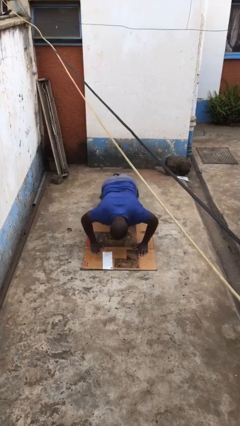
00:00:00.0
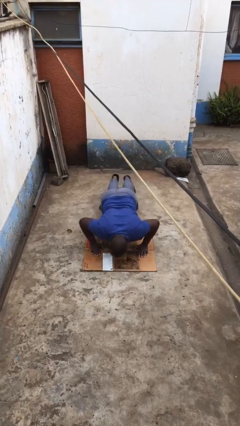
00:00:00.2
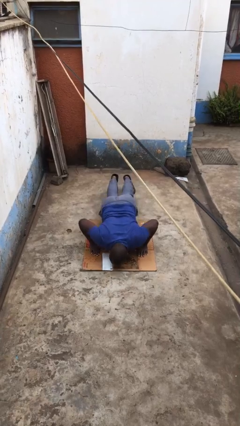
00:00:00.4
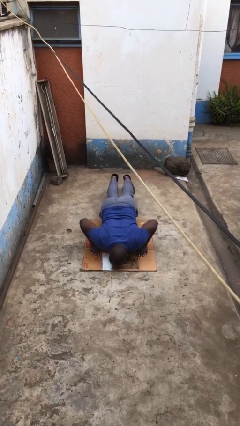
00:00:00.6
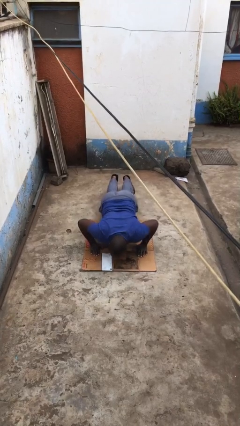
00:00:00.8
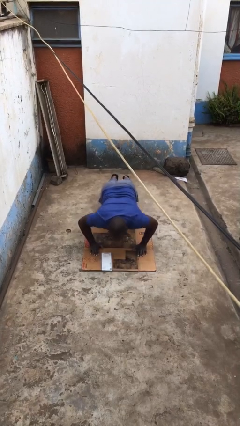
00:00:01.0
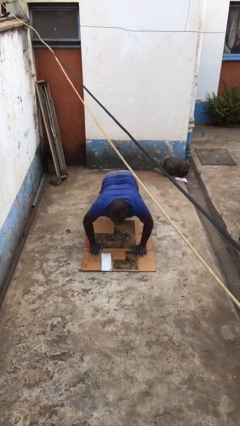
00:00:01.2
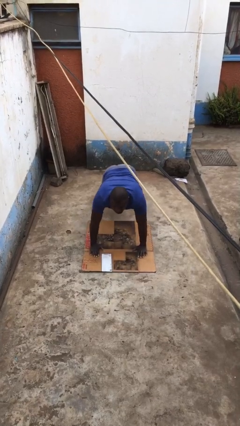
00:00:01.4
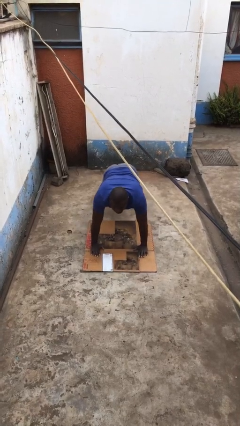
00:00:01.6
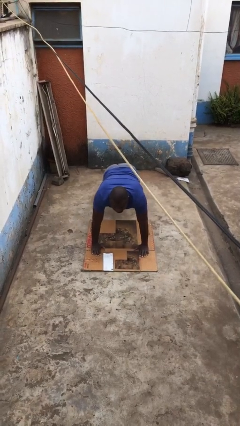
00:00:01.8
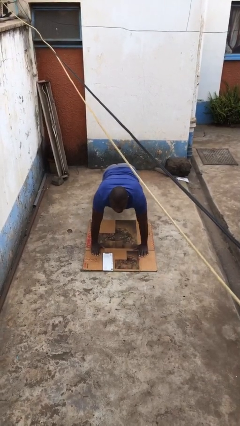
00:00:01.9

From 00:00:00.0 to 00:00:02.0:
person exercises with pushup

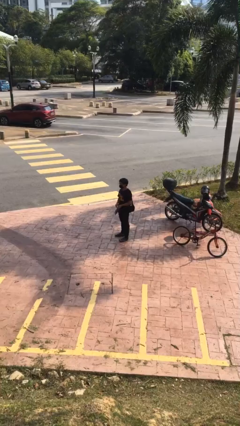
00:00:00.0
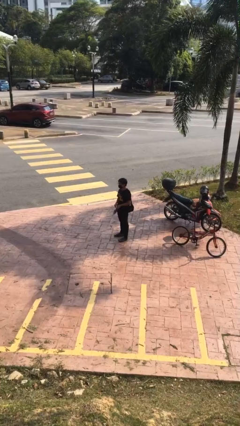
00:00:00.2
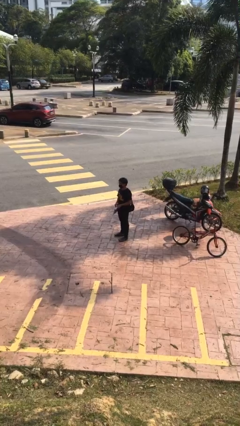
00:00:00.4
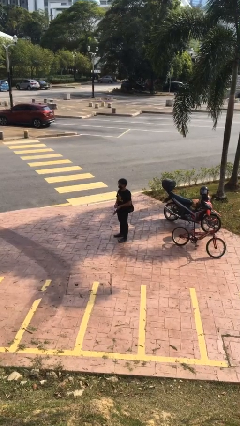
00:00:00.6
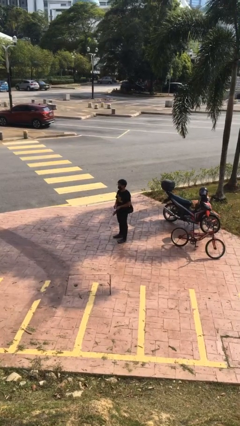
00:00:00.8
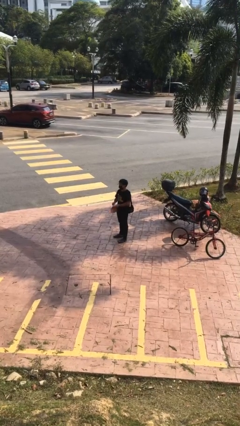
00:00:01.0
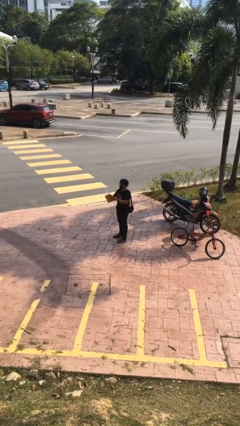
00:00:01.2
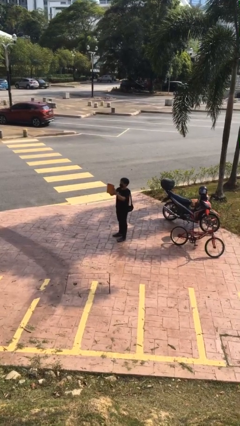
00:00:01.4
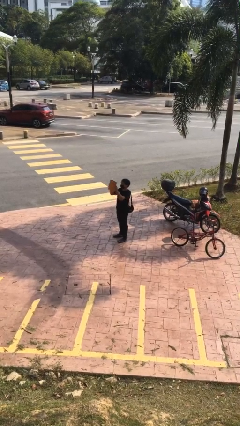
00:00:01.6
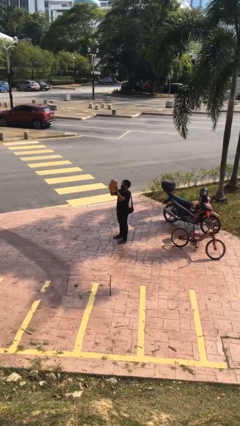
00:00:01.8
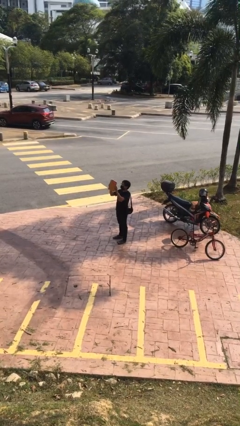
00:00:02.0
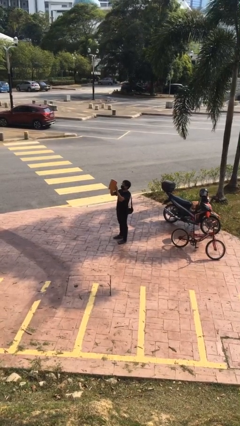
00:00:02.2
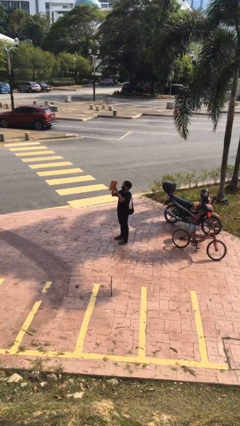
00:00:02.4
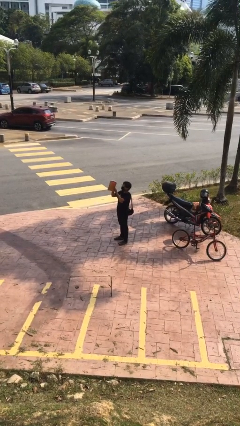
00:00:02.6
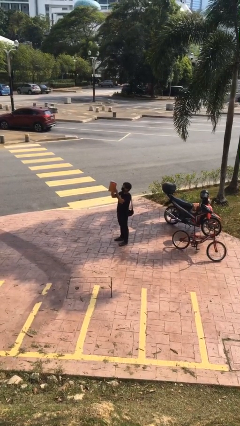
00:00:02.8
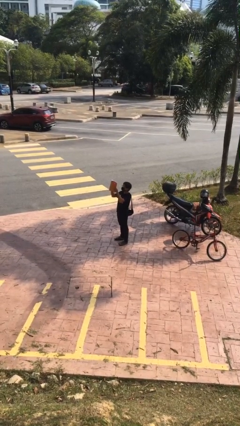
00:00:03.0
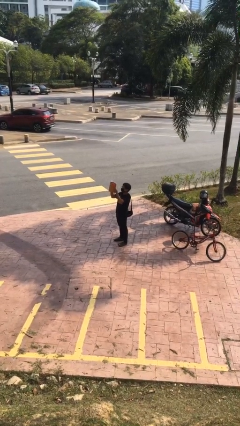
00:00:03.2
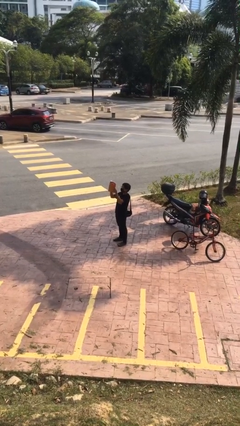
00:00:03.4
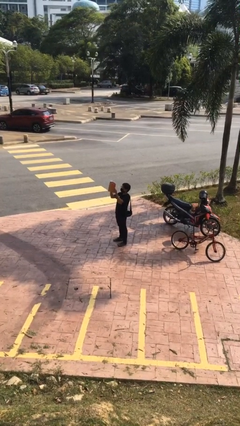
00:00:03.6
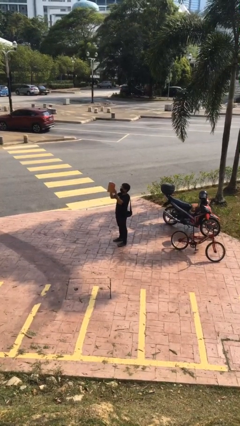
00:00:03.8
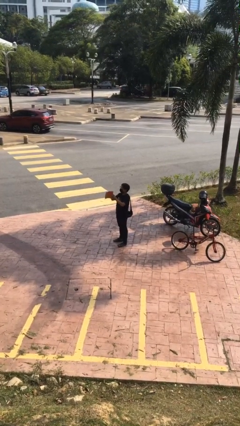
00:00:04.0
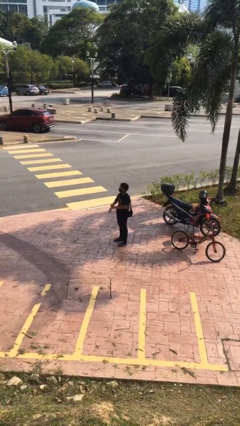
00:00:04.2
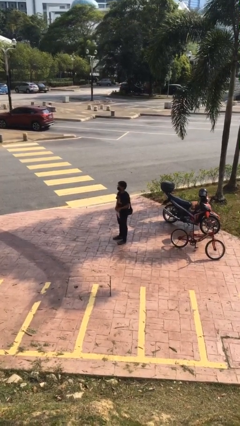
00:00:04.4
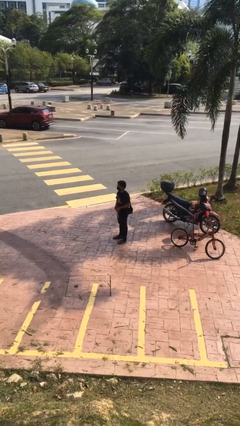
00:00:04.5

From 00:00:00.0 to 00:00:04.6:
person reads document

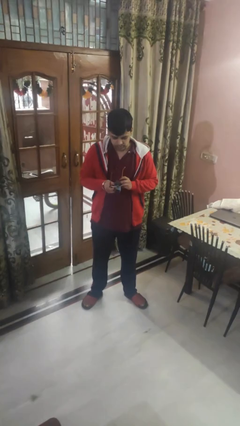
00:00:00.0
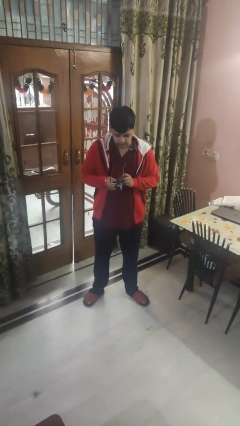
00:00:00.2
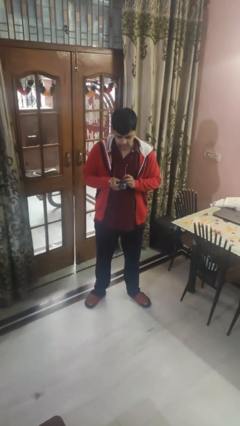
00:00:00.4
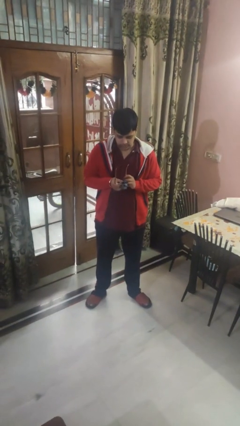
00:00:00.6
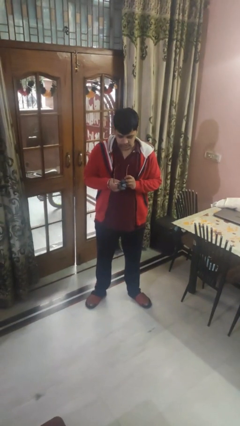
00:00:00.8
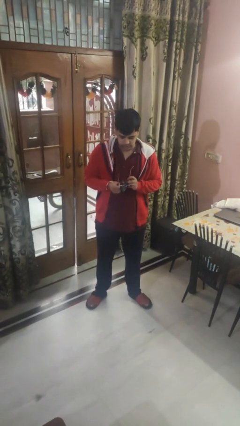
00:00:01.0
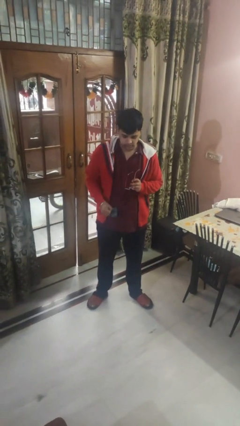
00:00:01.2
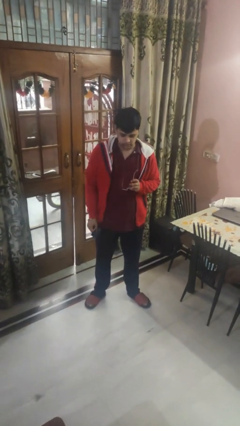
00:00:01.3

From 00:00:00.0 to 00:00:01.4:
person cleans eyeglasses

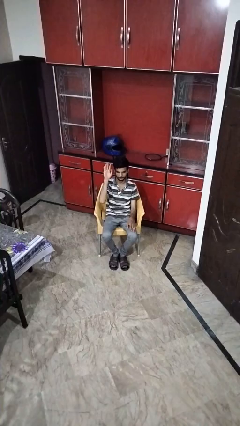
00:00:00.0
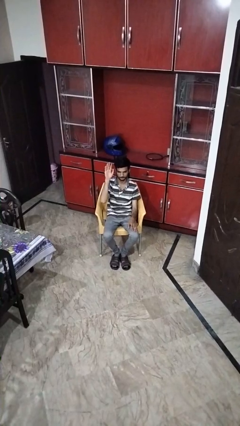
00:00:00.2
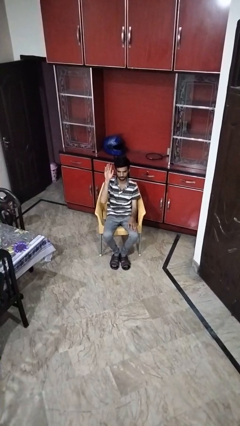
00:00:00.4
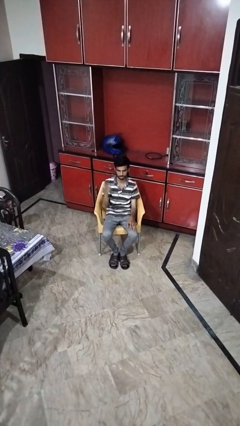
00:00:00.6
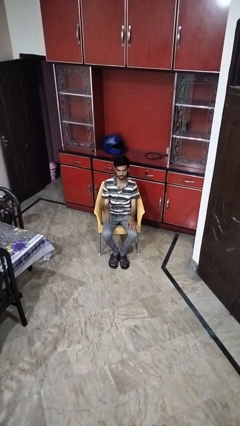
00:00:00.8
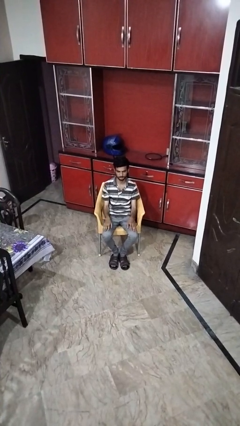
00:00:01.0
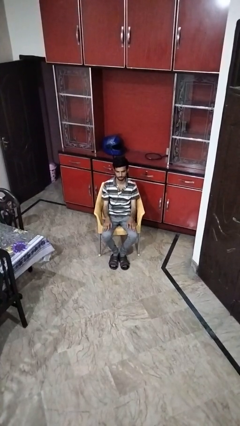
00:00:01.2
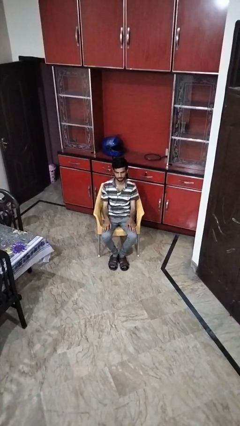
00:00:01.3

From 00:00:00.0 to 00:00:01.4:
person gestures lower hand

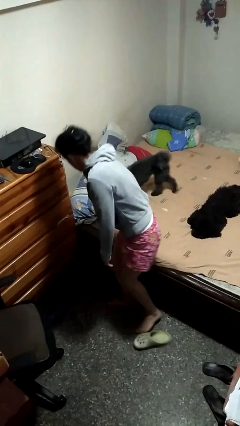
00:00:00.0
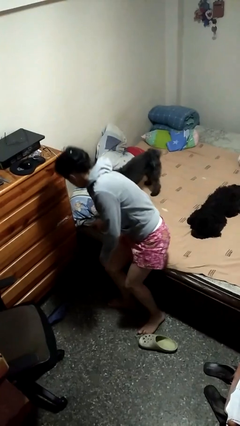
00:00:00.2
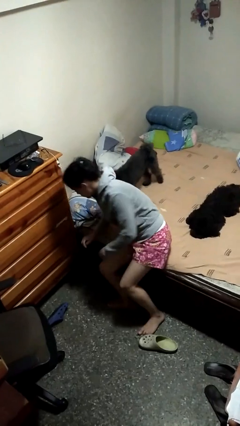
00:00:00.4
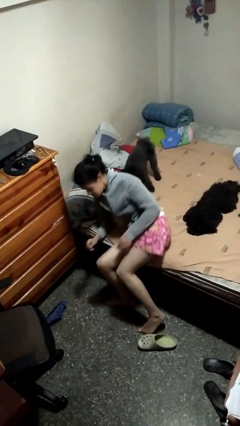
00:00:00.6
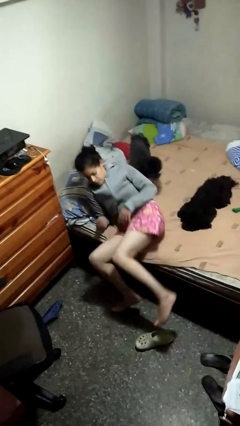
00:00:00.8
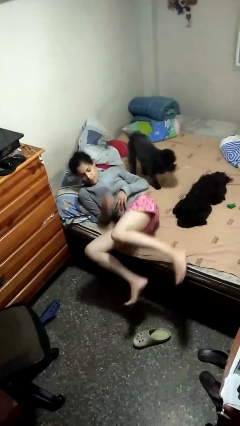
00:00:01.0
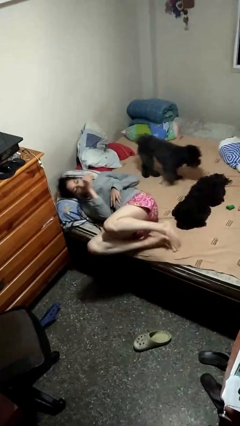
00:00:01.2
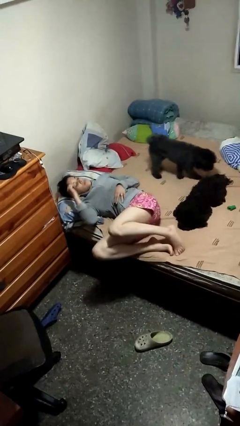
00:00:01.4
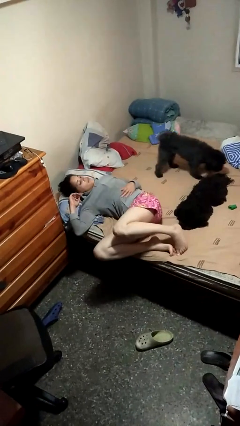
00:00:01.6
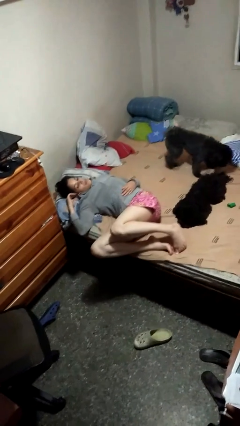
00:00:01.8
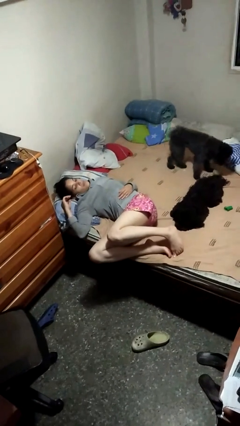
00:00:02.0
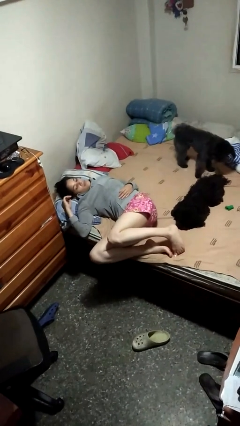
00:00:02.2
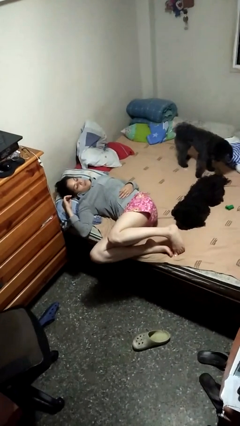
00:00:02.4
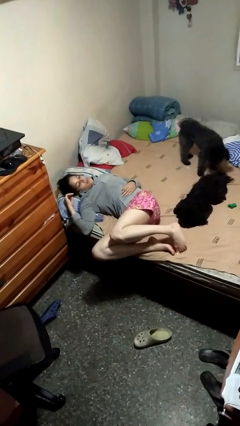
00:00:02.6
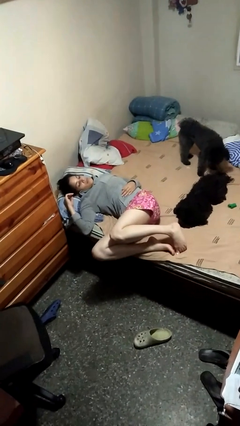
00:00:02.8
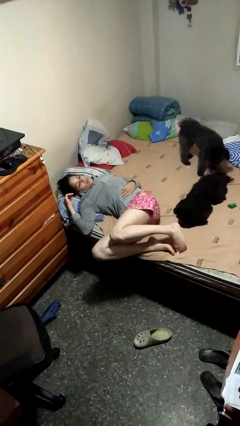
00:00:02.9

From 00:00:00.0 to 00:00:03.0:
person lies down on bed

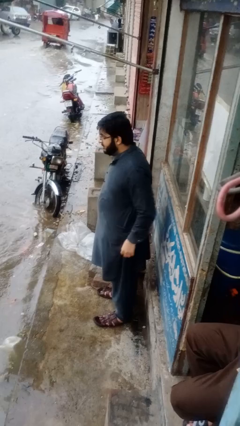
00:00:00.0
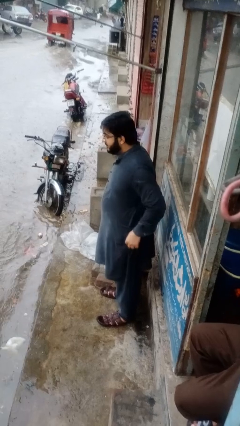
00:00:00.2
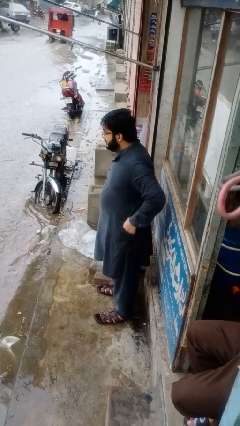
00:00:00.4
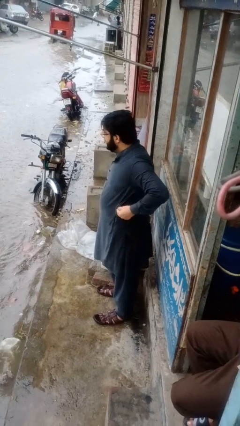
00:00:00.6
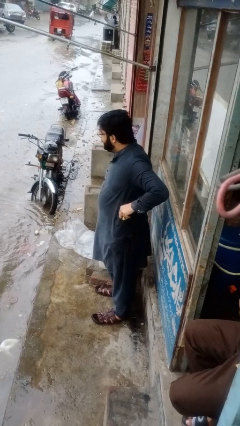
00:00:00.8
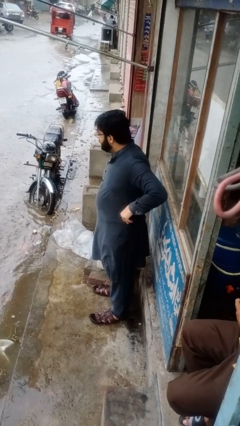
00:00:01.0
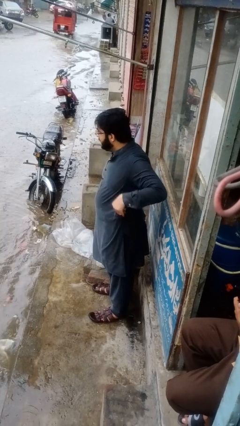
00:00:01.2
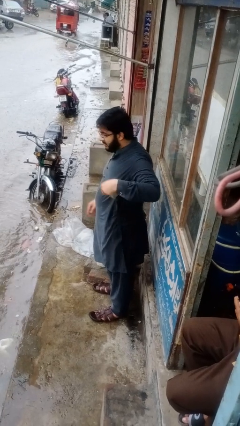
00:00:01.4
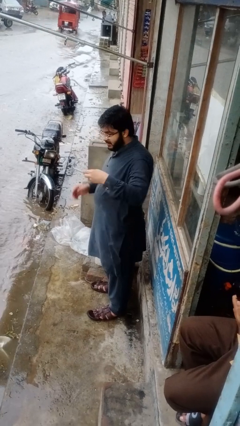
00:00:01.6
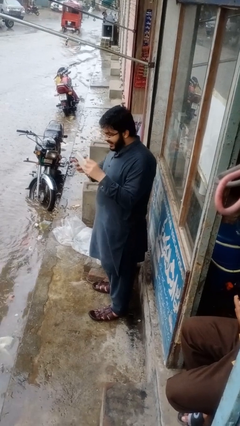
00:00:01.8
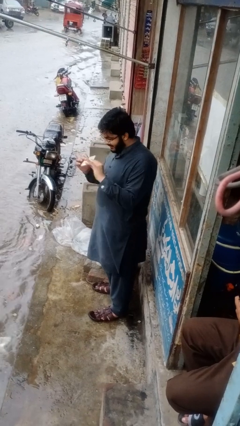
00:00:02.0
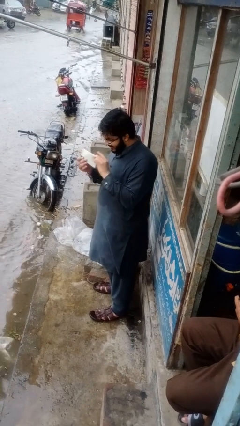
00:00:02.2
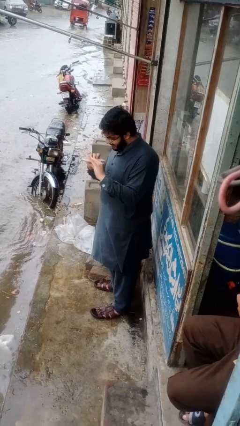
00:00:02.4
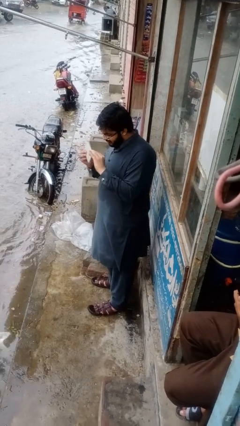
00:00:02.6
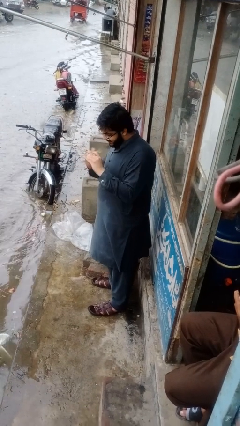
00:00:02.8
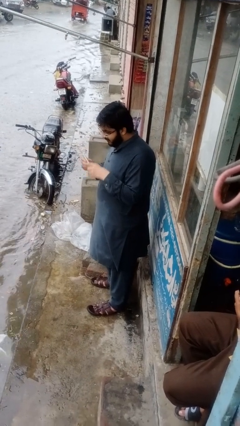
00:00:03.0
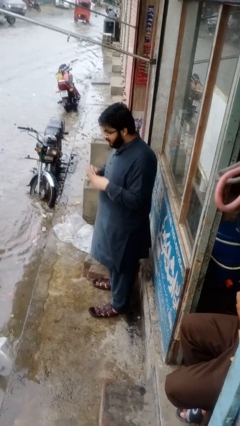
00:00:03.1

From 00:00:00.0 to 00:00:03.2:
person takes phone from pocket

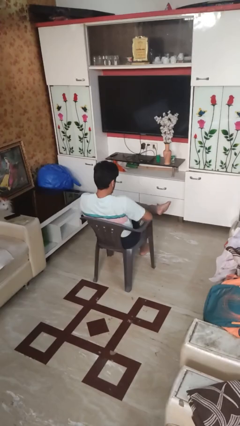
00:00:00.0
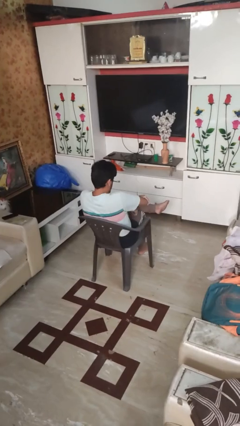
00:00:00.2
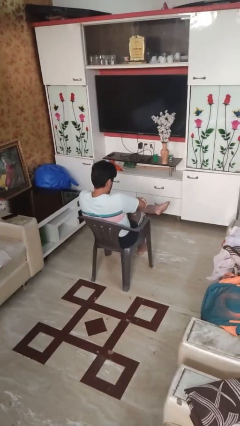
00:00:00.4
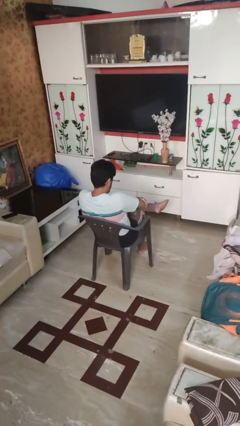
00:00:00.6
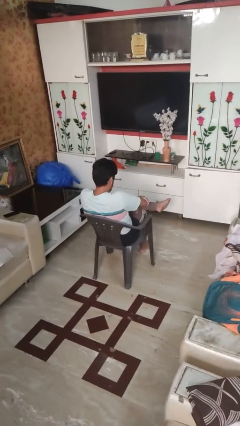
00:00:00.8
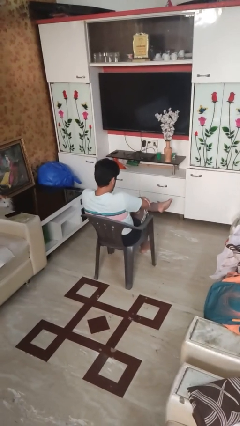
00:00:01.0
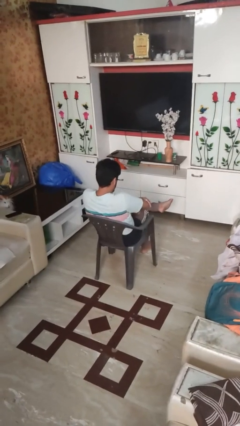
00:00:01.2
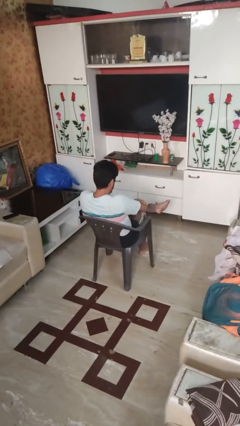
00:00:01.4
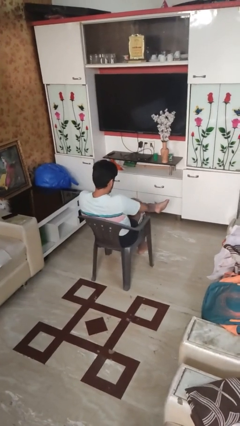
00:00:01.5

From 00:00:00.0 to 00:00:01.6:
person swats bug
